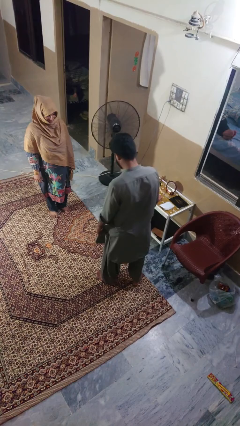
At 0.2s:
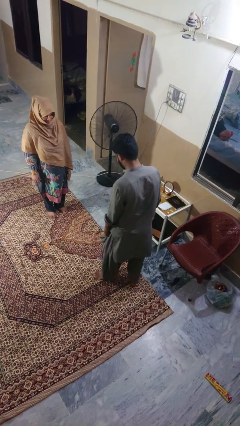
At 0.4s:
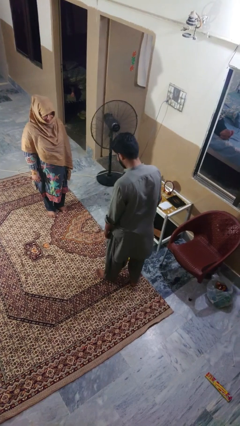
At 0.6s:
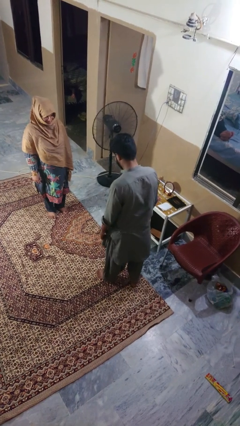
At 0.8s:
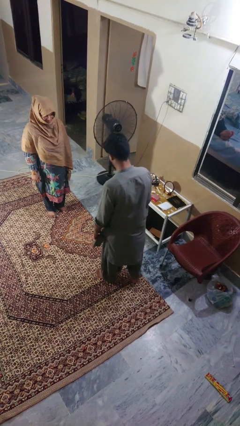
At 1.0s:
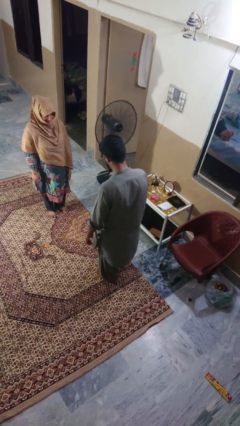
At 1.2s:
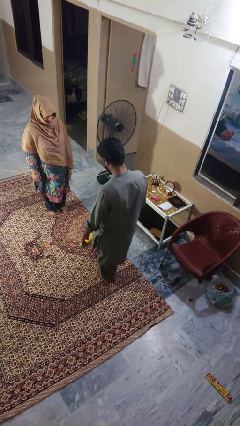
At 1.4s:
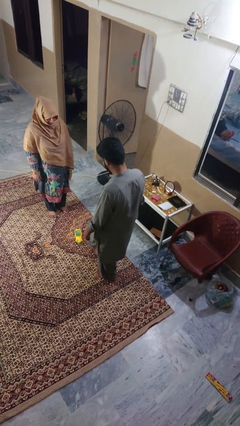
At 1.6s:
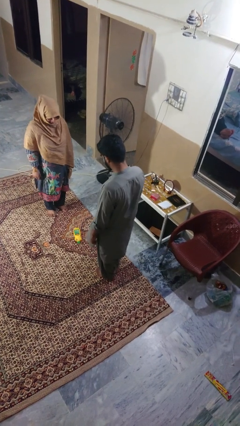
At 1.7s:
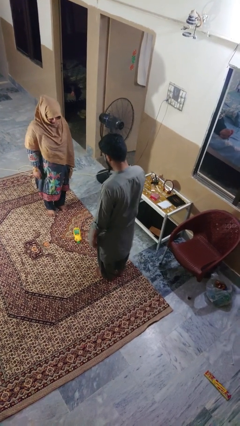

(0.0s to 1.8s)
person kicks object to person

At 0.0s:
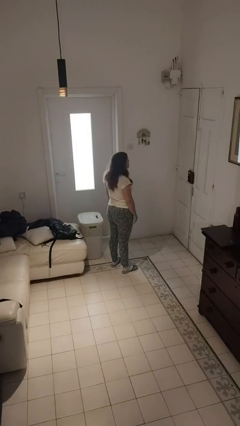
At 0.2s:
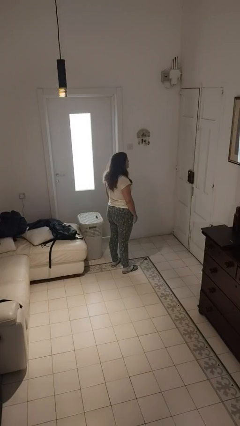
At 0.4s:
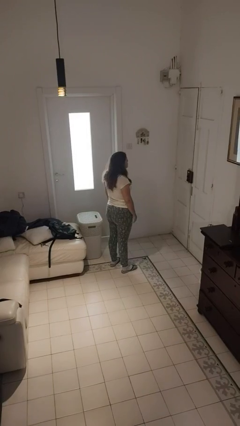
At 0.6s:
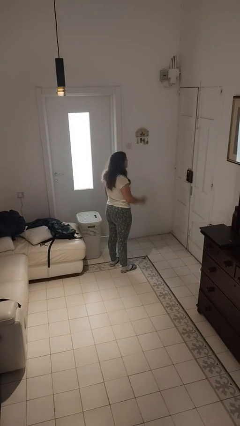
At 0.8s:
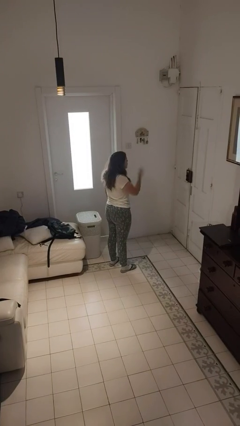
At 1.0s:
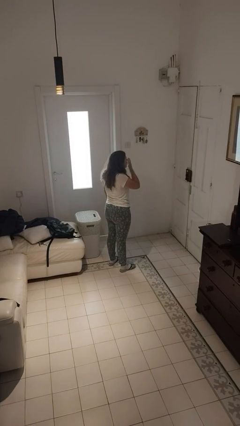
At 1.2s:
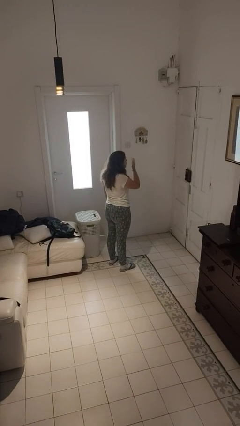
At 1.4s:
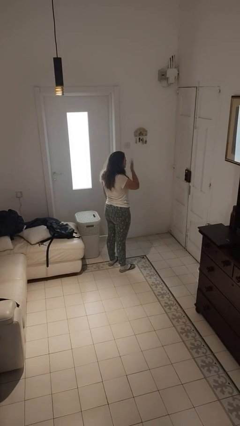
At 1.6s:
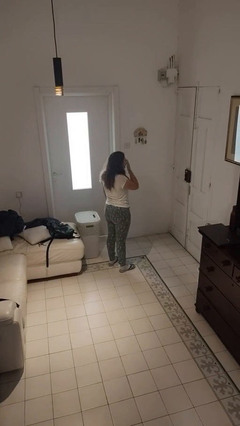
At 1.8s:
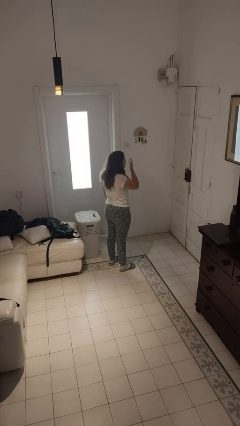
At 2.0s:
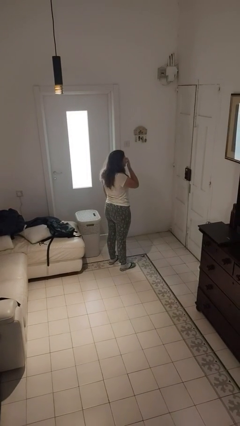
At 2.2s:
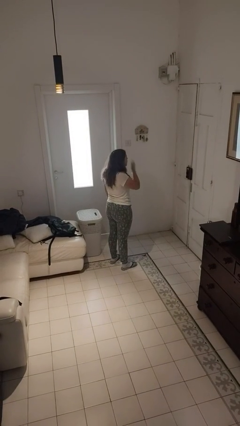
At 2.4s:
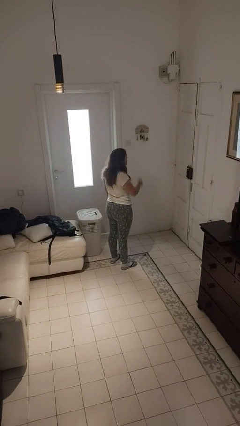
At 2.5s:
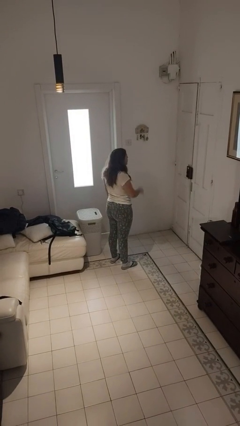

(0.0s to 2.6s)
person yawns

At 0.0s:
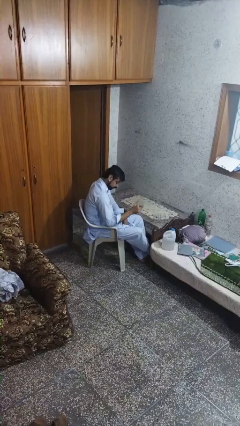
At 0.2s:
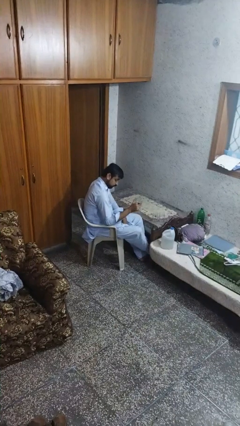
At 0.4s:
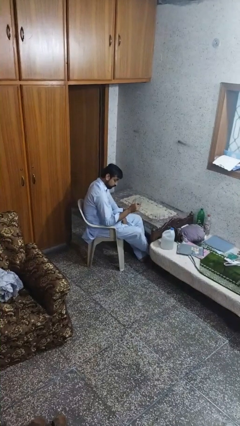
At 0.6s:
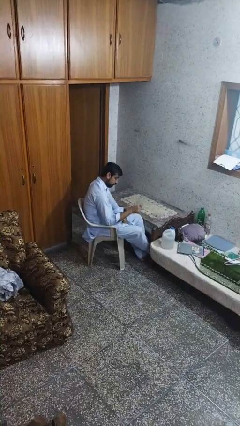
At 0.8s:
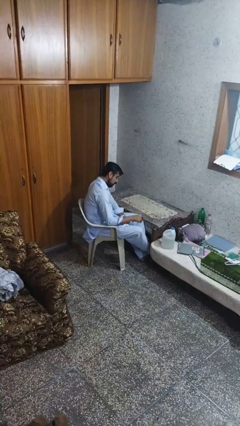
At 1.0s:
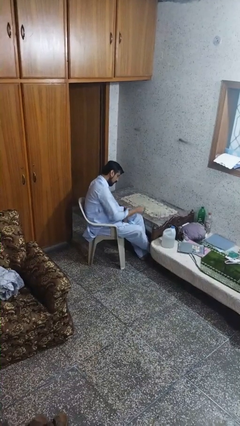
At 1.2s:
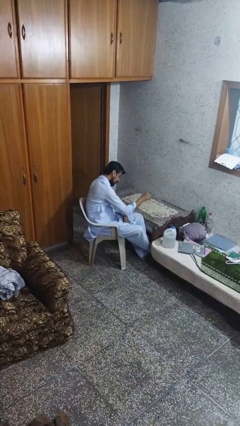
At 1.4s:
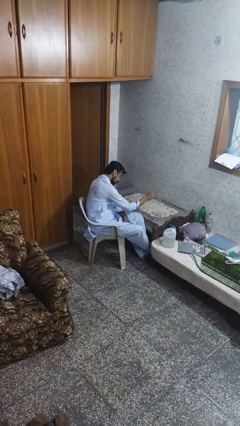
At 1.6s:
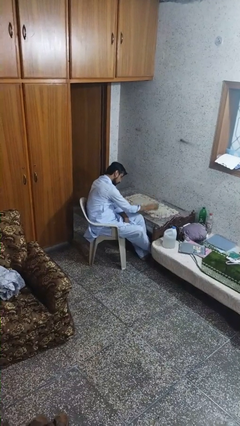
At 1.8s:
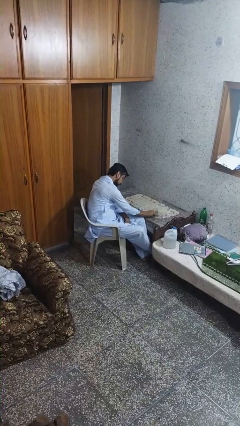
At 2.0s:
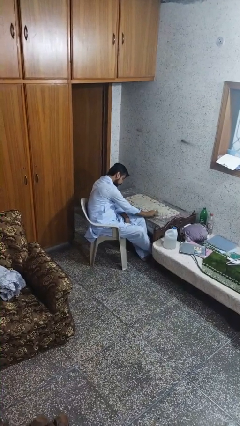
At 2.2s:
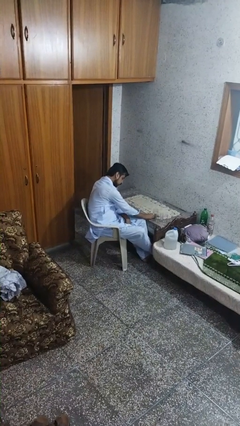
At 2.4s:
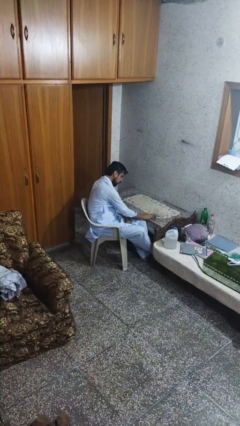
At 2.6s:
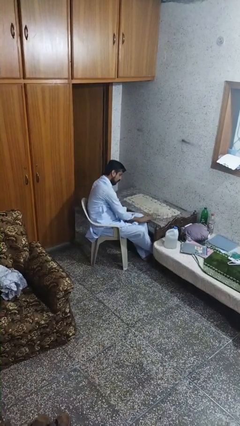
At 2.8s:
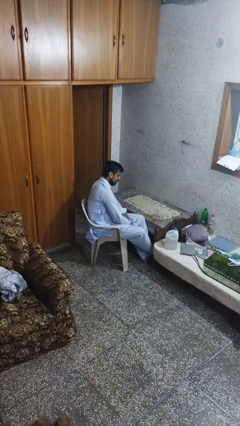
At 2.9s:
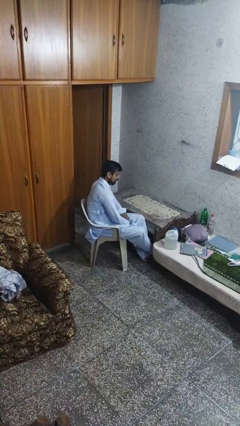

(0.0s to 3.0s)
person puts down object on table

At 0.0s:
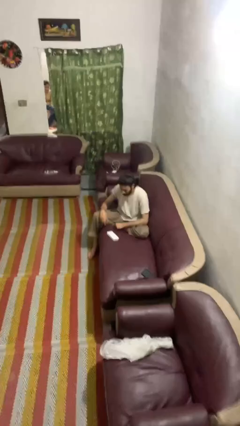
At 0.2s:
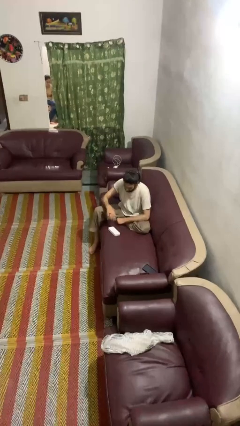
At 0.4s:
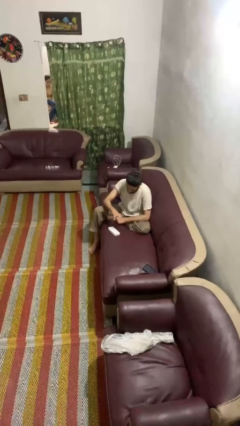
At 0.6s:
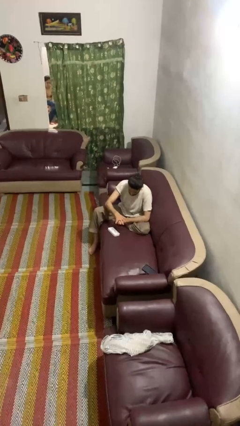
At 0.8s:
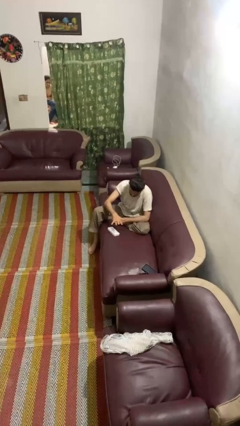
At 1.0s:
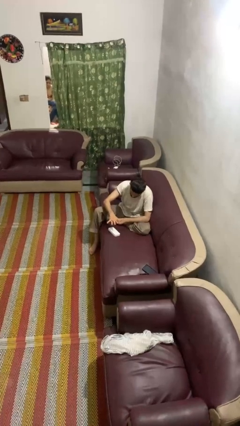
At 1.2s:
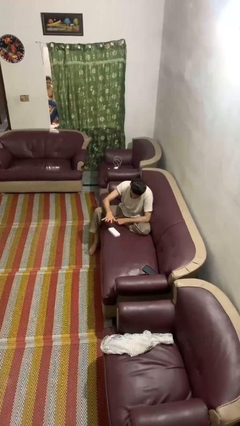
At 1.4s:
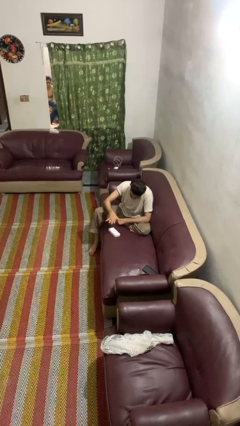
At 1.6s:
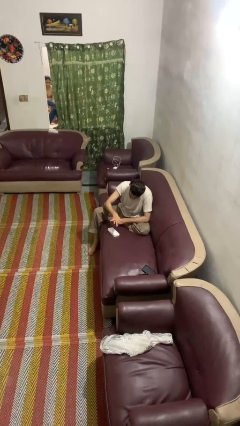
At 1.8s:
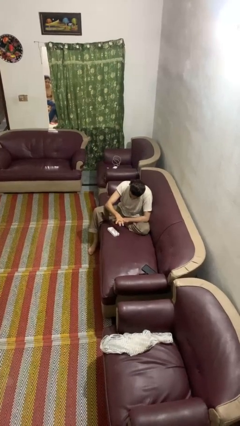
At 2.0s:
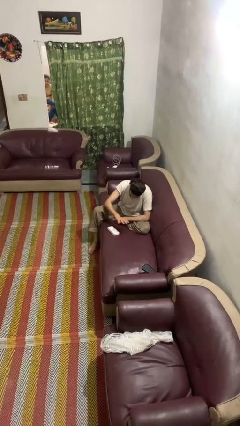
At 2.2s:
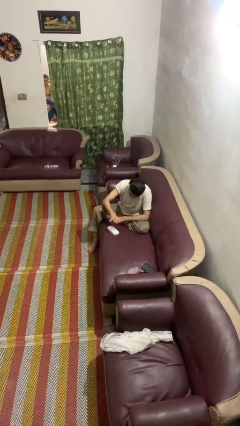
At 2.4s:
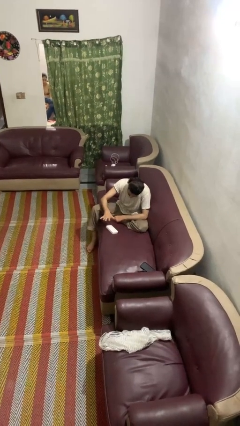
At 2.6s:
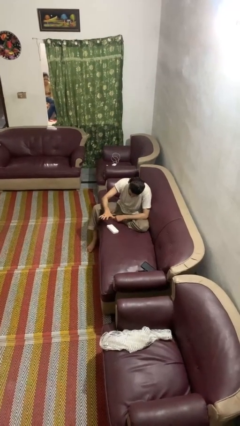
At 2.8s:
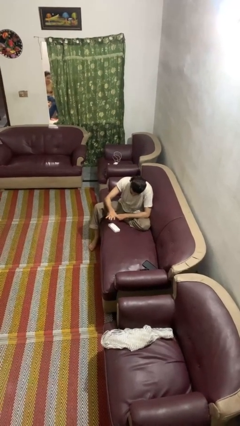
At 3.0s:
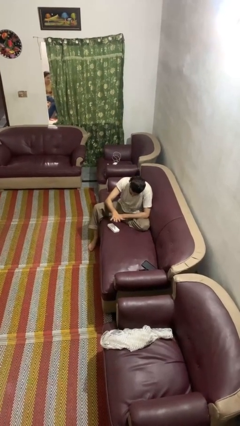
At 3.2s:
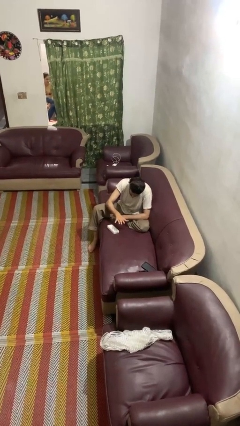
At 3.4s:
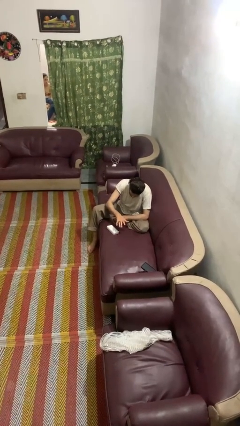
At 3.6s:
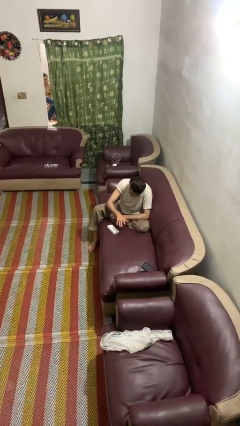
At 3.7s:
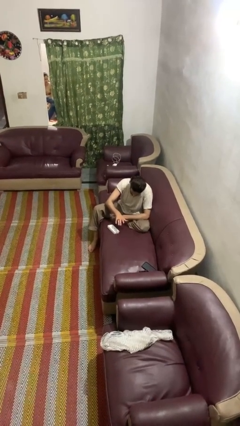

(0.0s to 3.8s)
person waves hand over object

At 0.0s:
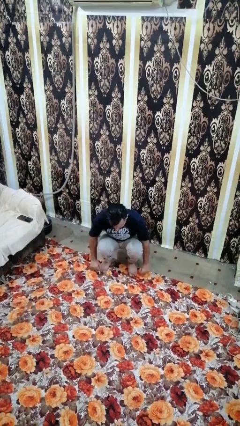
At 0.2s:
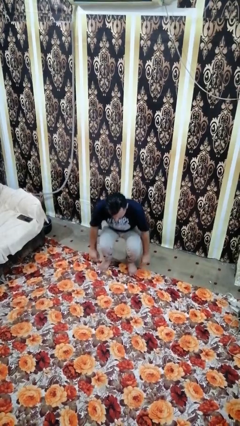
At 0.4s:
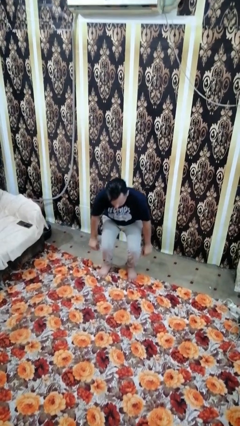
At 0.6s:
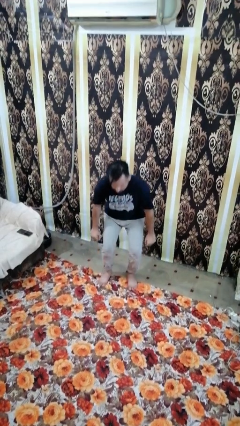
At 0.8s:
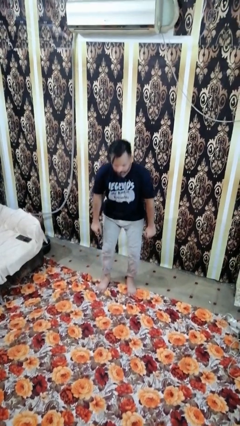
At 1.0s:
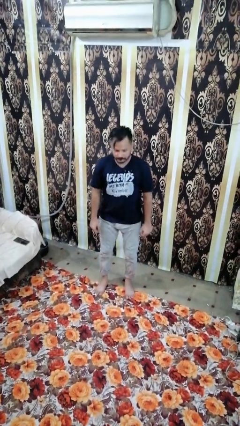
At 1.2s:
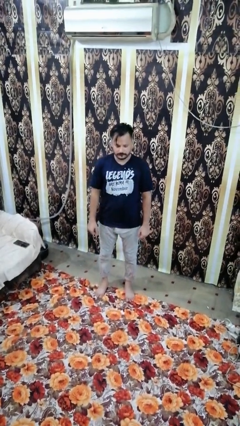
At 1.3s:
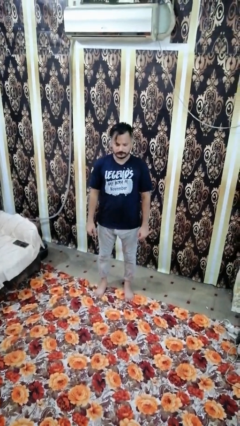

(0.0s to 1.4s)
person stands up

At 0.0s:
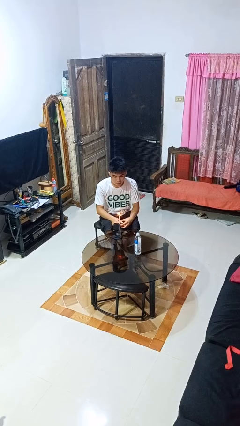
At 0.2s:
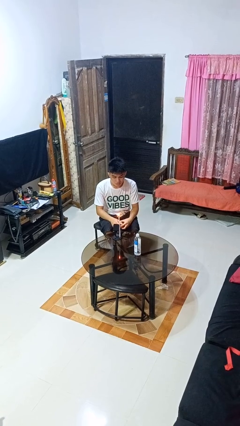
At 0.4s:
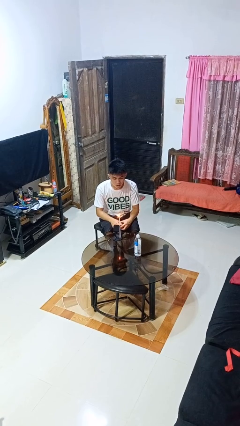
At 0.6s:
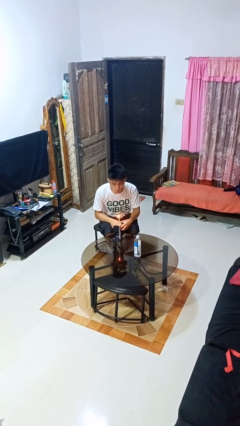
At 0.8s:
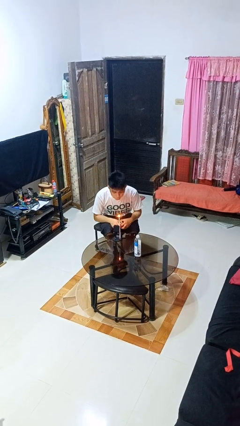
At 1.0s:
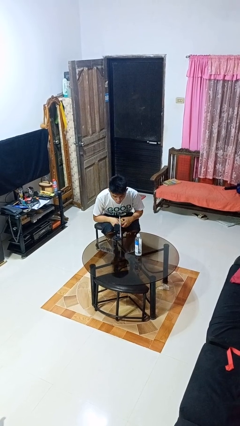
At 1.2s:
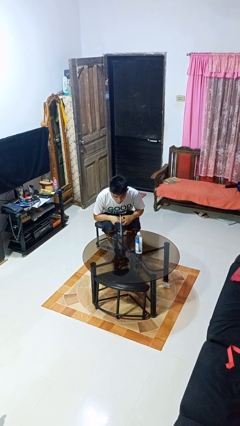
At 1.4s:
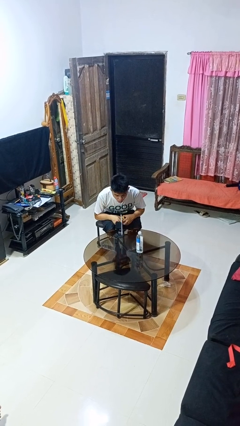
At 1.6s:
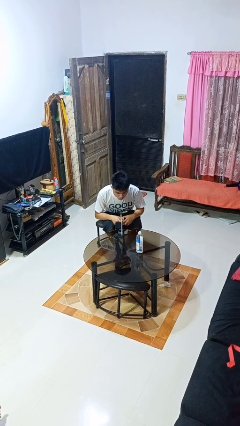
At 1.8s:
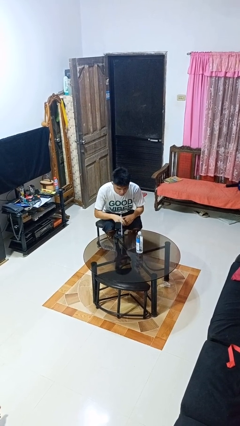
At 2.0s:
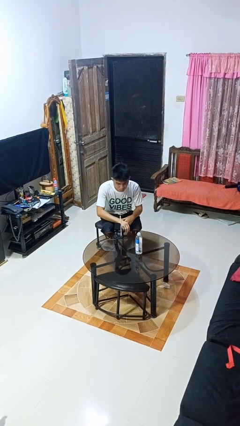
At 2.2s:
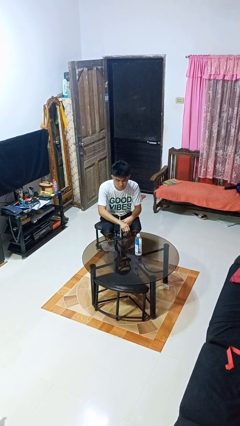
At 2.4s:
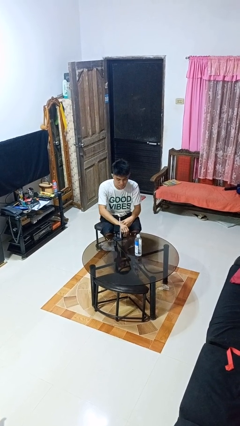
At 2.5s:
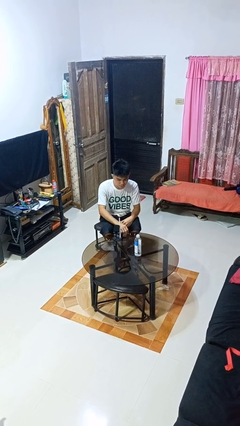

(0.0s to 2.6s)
person extinguishes candle

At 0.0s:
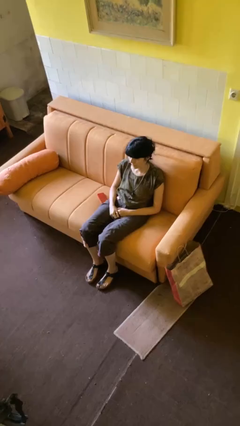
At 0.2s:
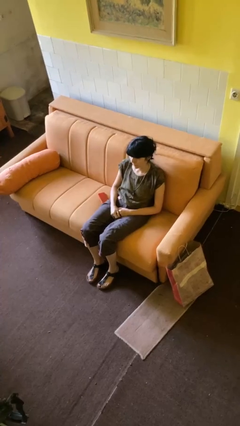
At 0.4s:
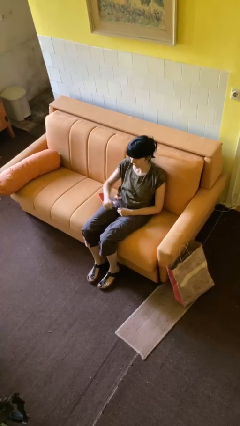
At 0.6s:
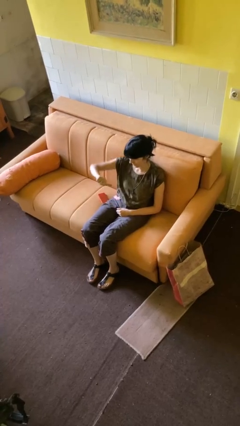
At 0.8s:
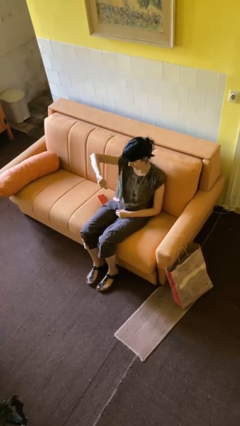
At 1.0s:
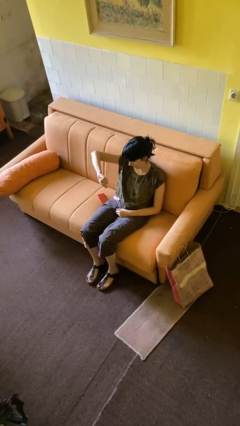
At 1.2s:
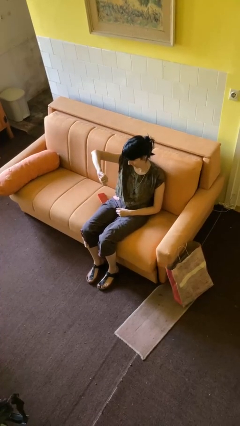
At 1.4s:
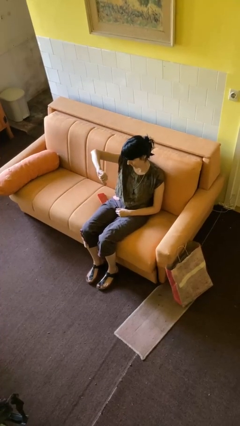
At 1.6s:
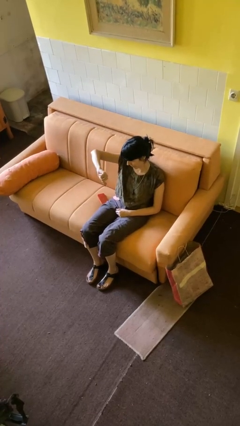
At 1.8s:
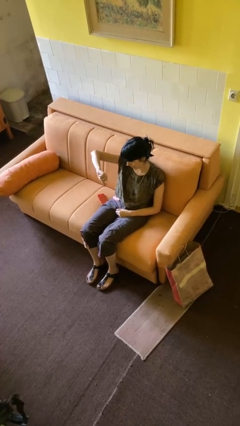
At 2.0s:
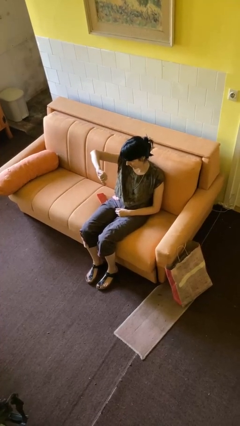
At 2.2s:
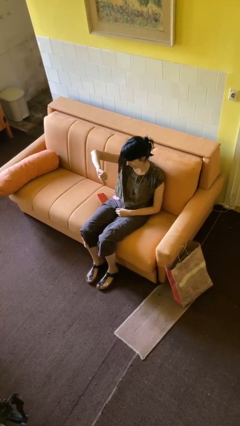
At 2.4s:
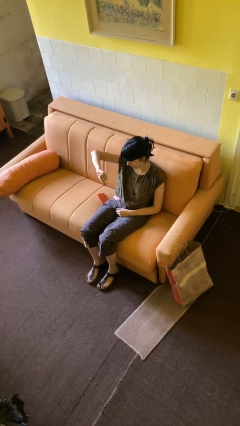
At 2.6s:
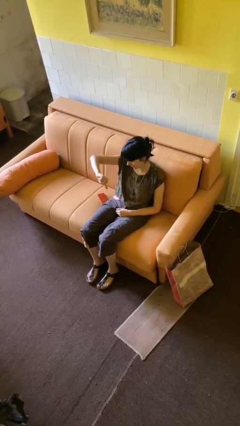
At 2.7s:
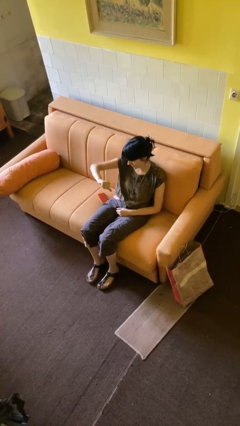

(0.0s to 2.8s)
person gestures thumbs down
